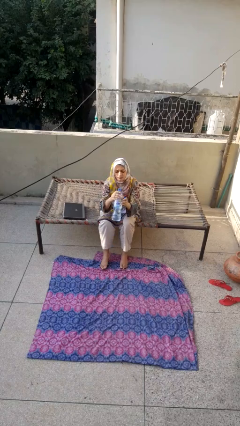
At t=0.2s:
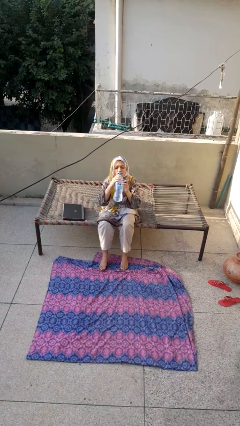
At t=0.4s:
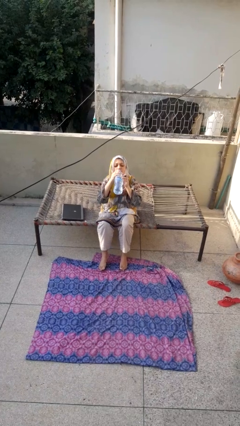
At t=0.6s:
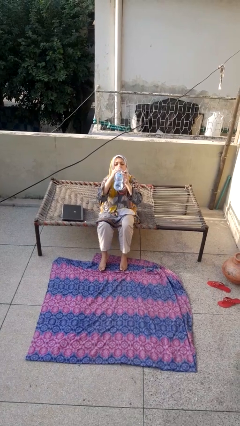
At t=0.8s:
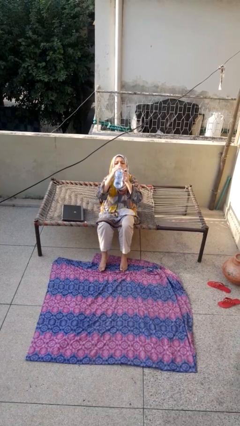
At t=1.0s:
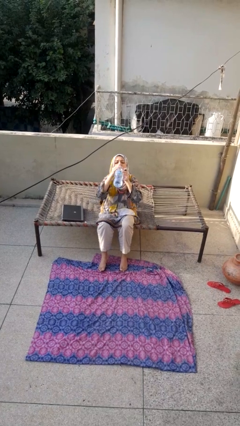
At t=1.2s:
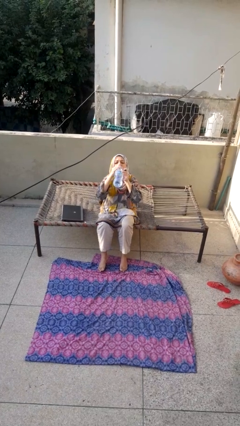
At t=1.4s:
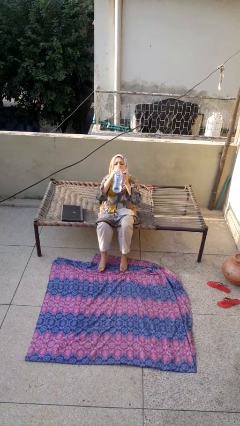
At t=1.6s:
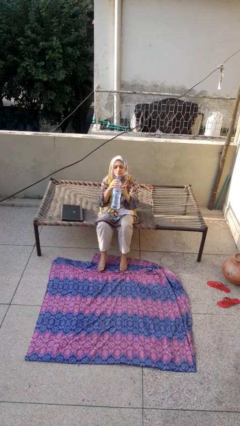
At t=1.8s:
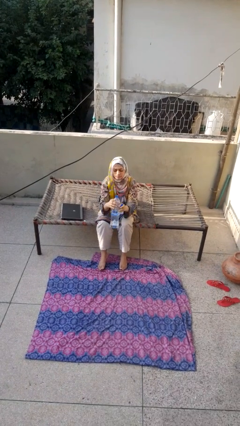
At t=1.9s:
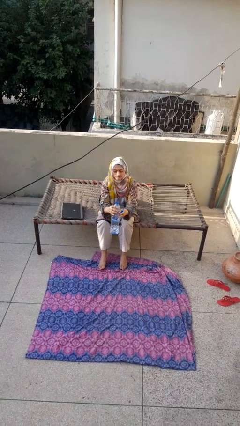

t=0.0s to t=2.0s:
person drinks from bottle

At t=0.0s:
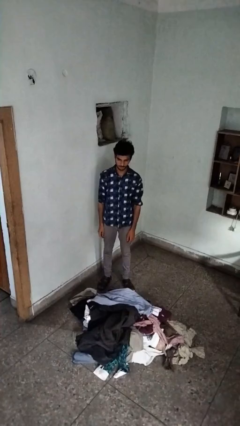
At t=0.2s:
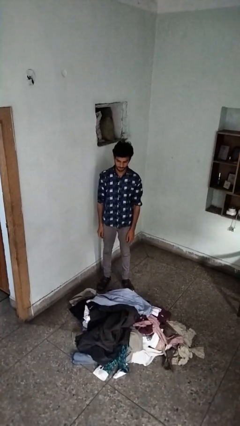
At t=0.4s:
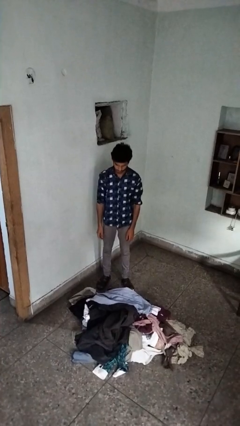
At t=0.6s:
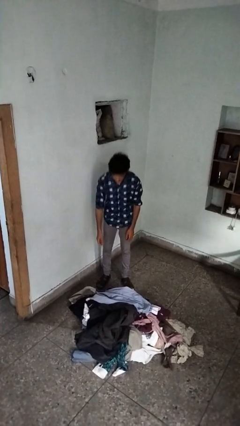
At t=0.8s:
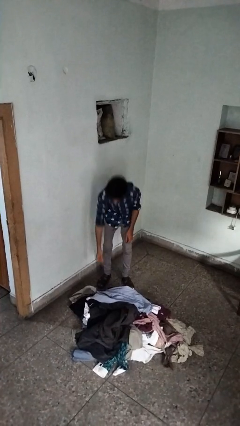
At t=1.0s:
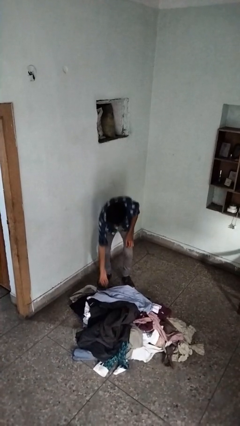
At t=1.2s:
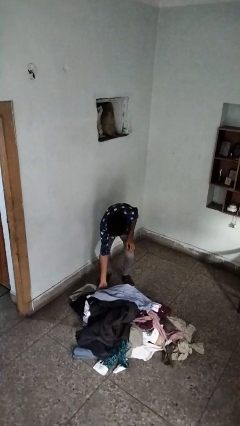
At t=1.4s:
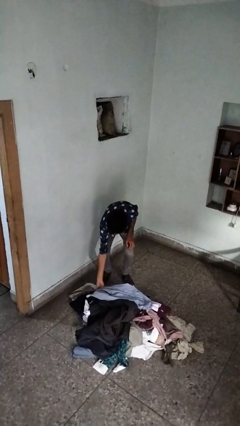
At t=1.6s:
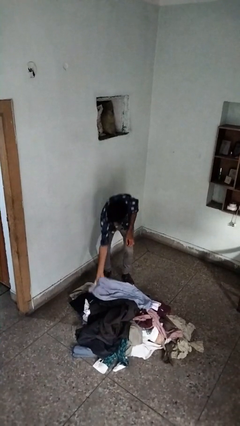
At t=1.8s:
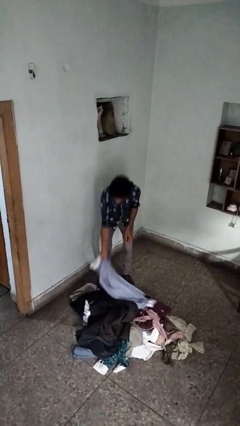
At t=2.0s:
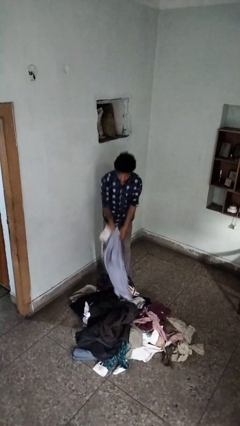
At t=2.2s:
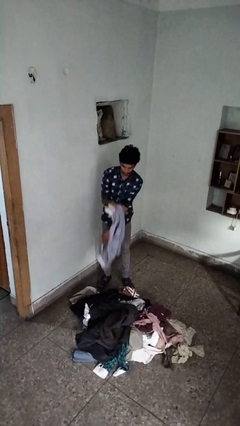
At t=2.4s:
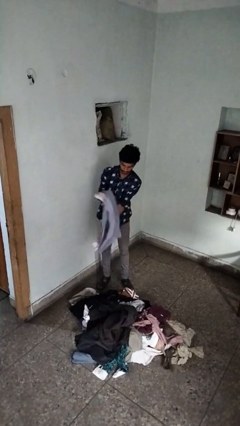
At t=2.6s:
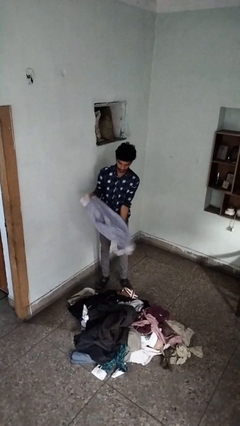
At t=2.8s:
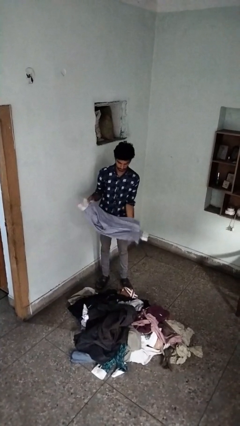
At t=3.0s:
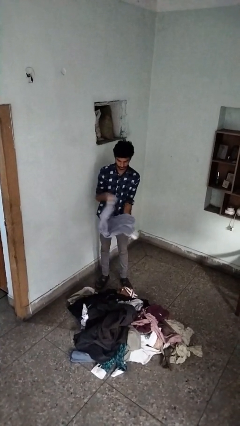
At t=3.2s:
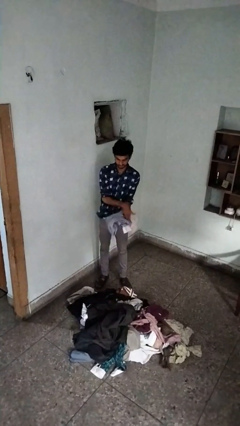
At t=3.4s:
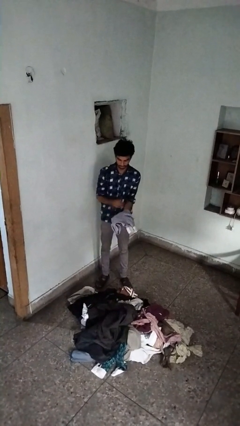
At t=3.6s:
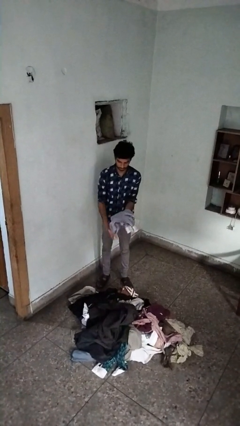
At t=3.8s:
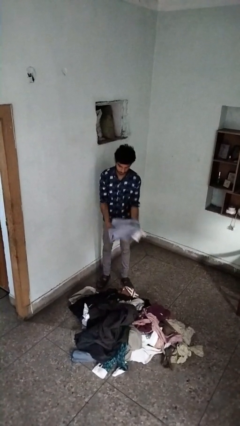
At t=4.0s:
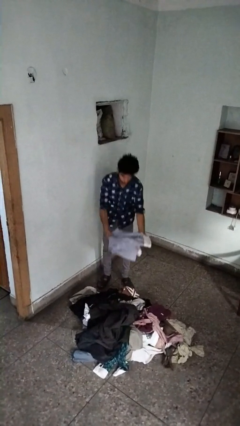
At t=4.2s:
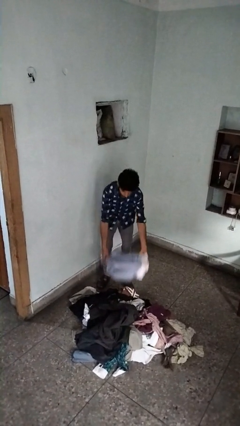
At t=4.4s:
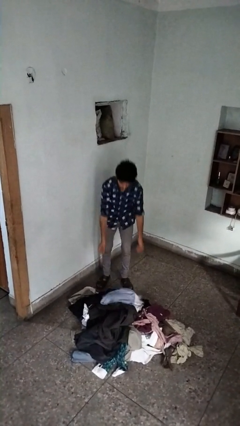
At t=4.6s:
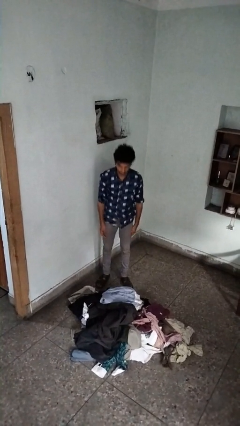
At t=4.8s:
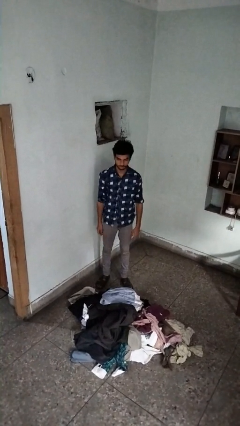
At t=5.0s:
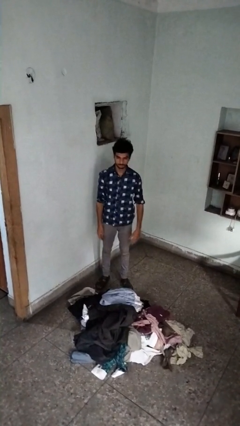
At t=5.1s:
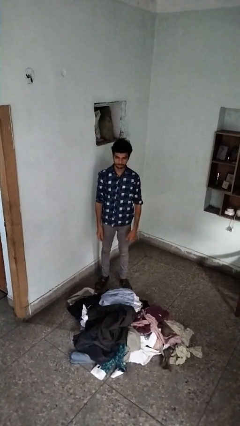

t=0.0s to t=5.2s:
person folds shirt

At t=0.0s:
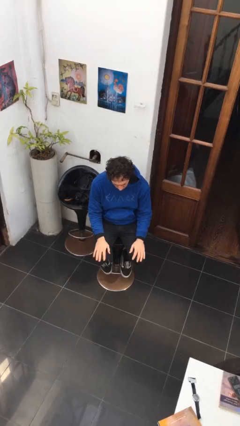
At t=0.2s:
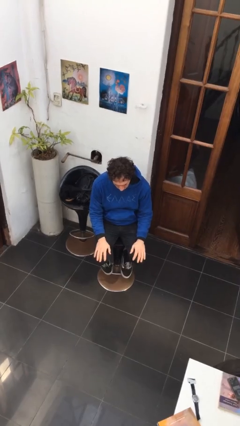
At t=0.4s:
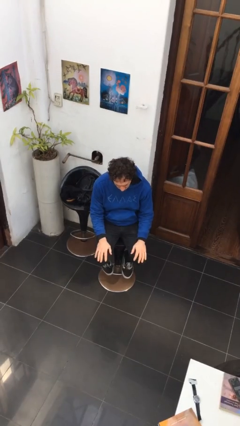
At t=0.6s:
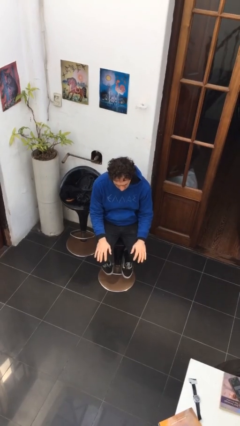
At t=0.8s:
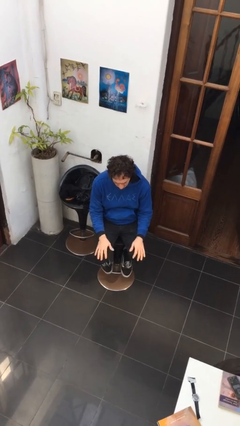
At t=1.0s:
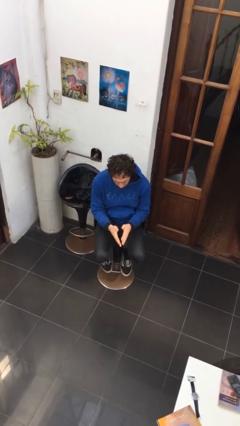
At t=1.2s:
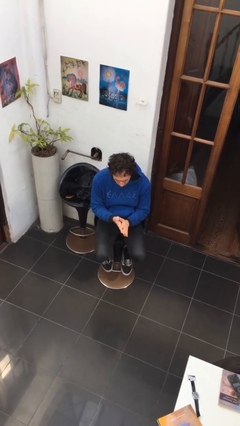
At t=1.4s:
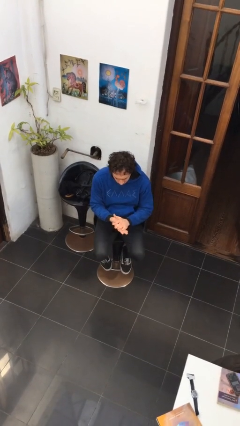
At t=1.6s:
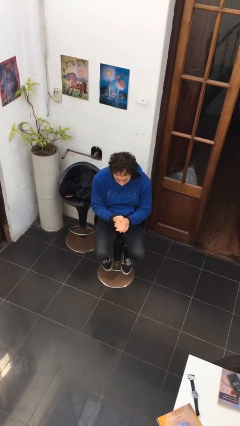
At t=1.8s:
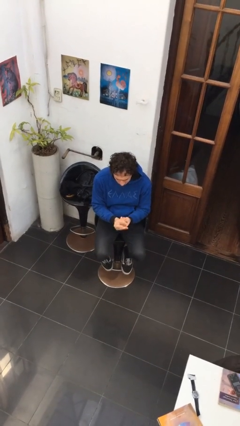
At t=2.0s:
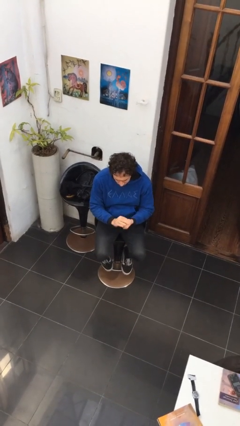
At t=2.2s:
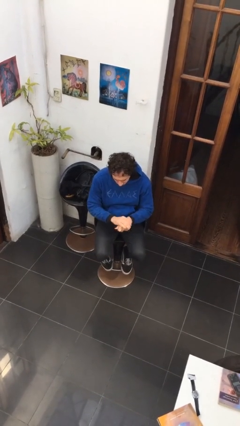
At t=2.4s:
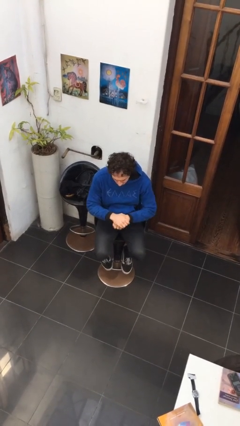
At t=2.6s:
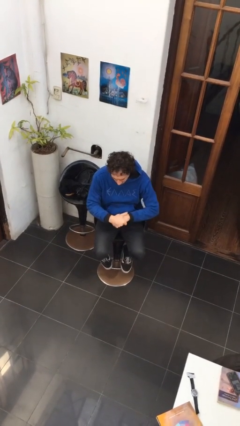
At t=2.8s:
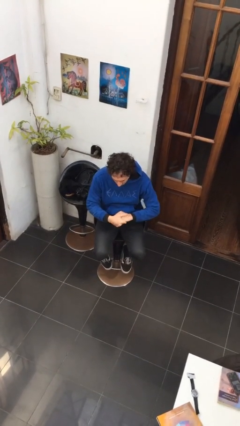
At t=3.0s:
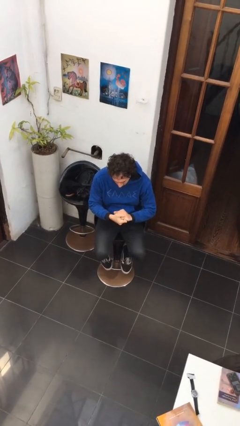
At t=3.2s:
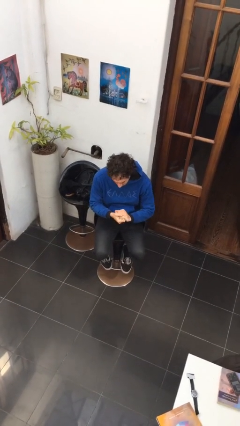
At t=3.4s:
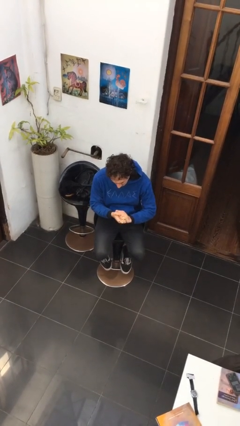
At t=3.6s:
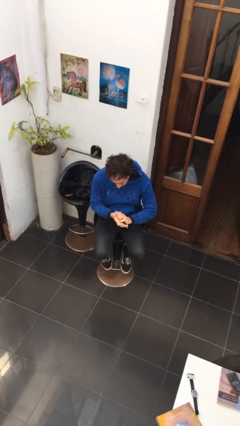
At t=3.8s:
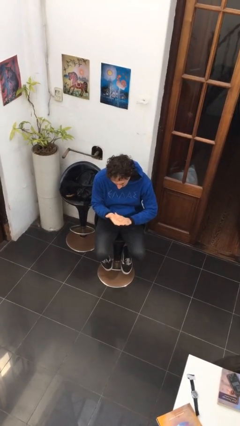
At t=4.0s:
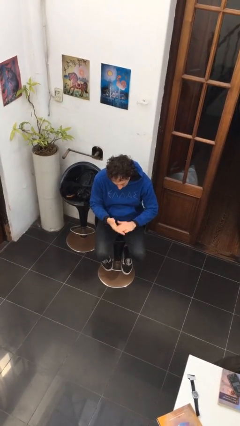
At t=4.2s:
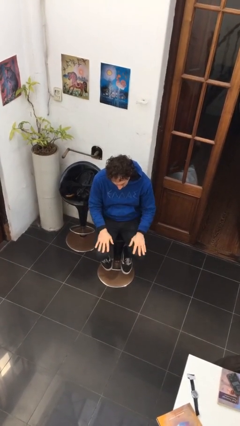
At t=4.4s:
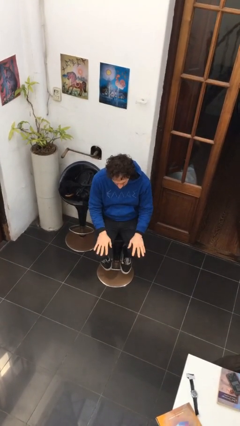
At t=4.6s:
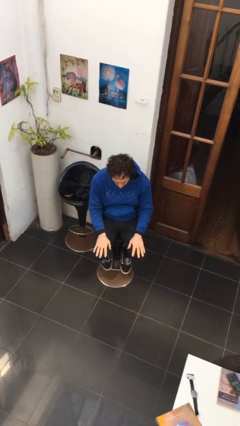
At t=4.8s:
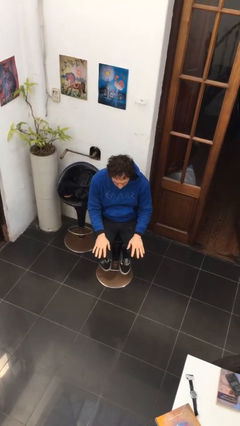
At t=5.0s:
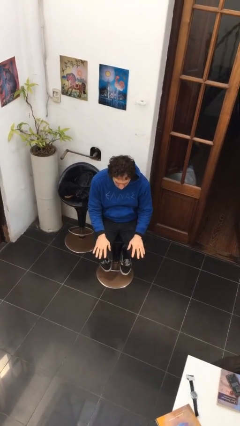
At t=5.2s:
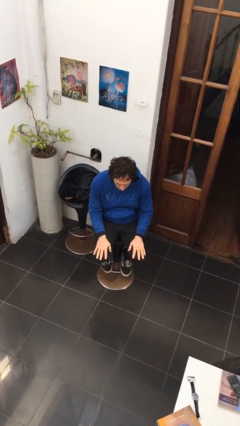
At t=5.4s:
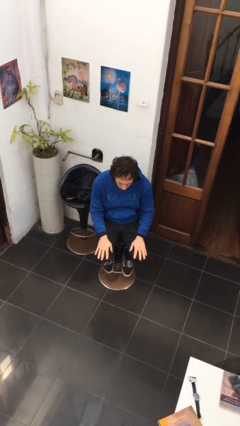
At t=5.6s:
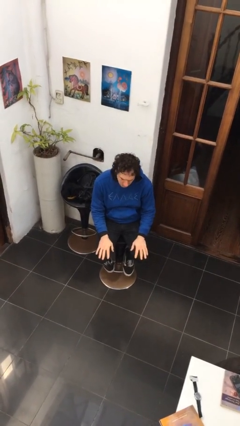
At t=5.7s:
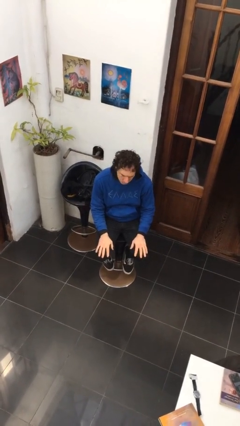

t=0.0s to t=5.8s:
person looks at hands in lap

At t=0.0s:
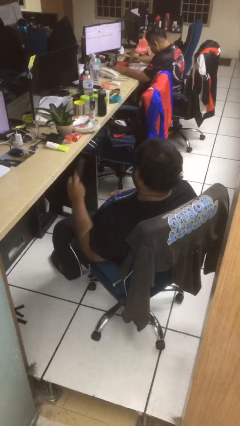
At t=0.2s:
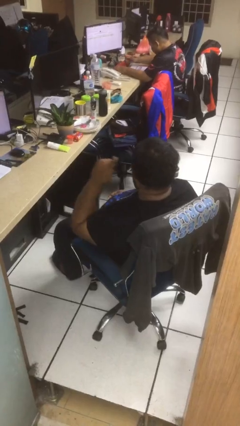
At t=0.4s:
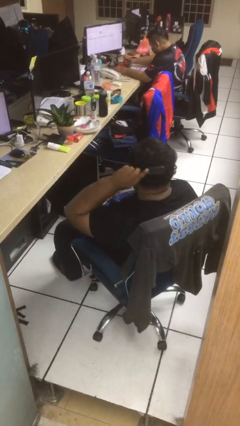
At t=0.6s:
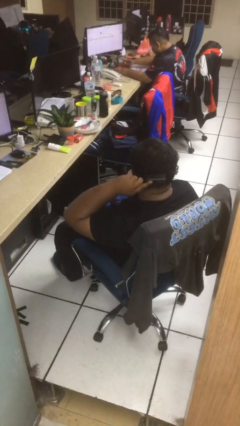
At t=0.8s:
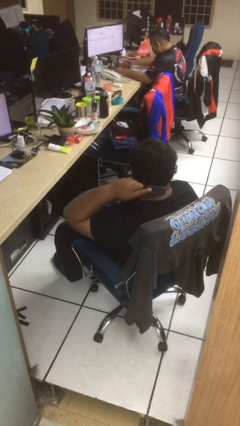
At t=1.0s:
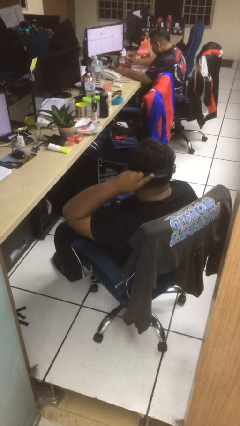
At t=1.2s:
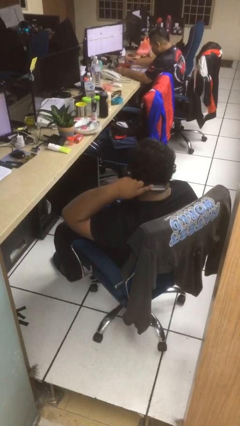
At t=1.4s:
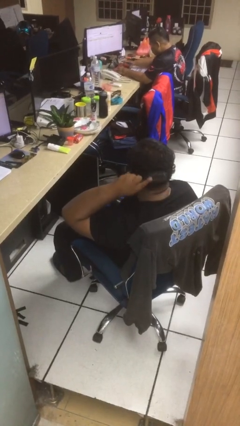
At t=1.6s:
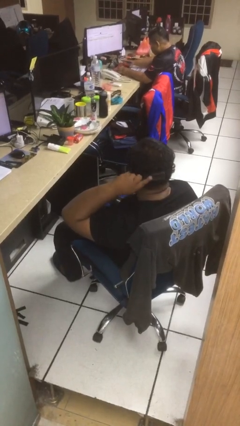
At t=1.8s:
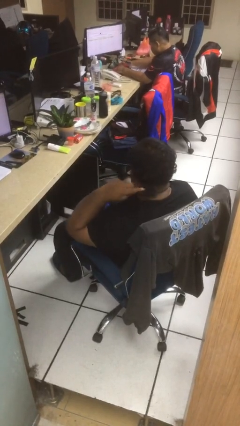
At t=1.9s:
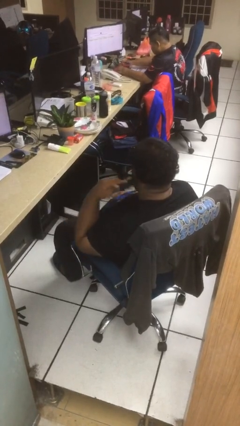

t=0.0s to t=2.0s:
person brushes hair

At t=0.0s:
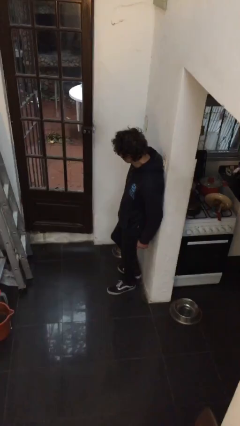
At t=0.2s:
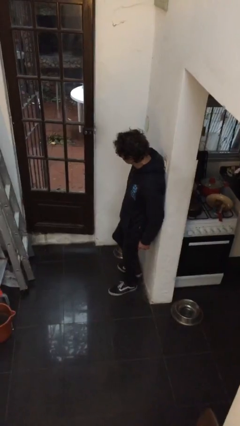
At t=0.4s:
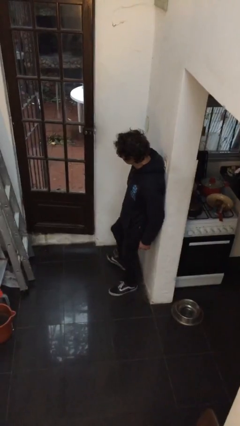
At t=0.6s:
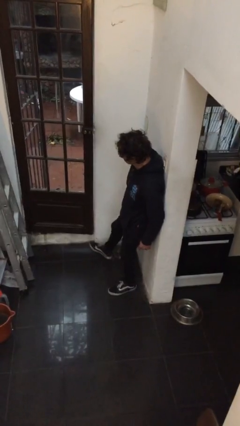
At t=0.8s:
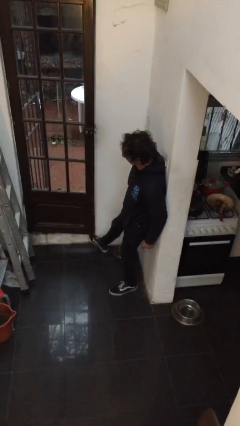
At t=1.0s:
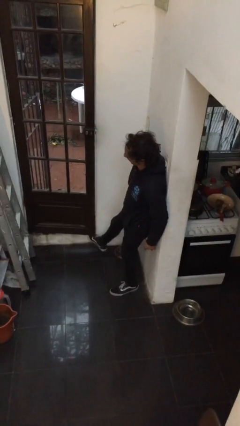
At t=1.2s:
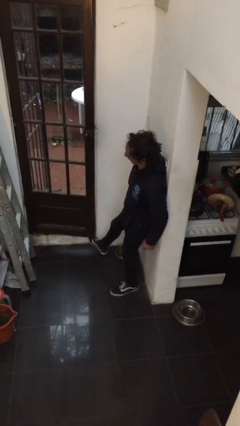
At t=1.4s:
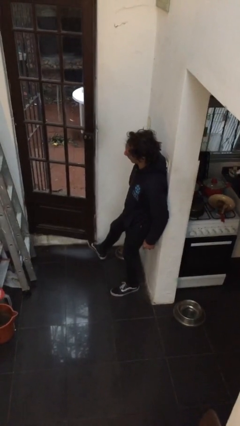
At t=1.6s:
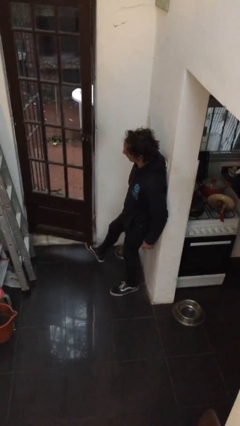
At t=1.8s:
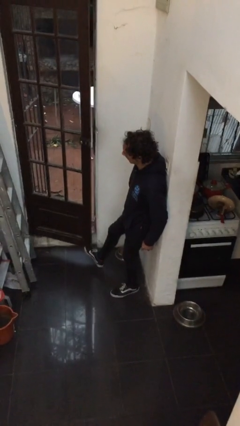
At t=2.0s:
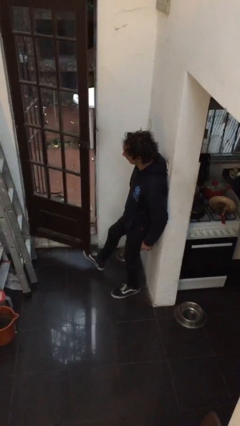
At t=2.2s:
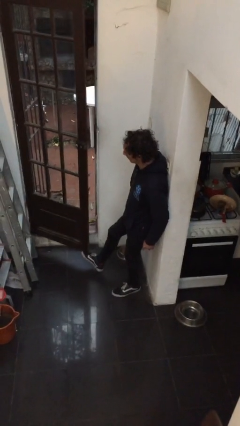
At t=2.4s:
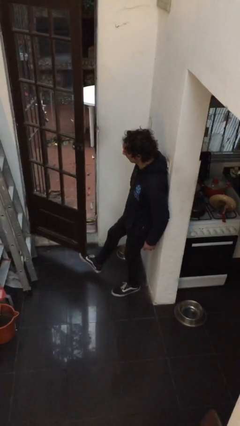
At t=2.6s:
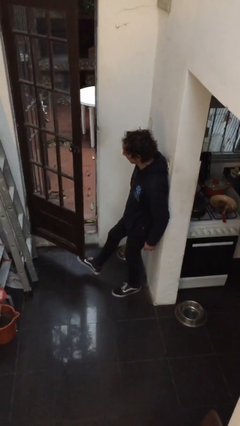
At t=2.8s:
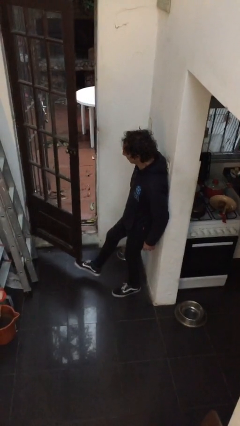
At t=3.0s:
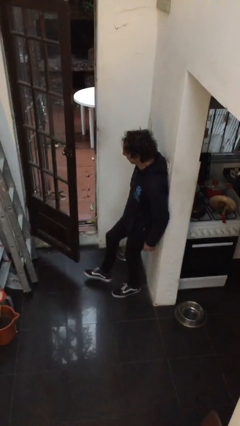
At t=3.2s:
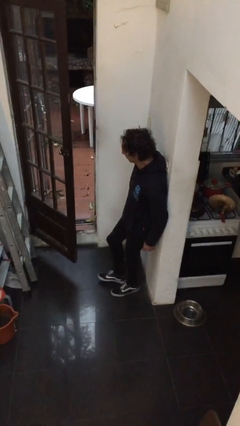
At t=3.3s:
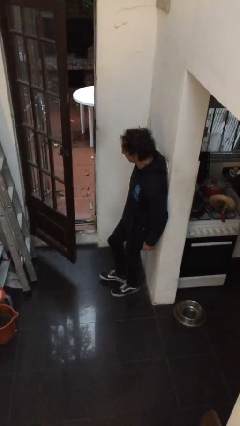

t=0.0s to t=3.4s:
person opens facility door
